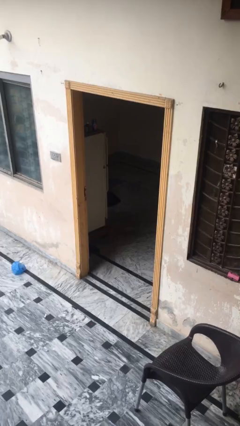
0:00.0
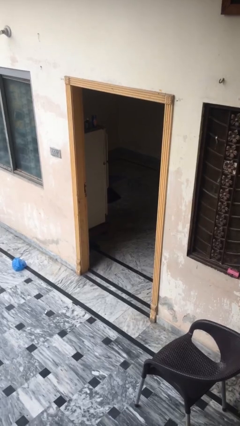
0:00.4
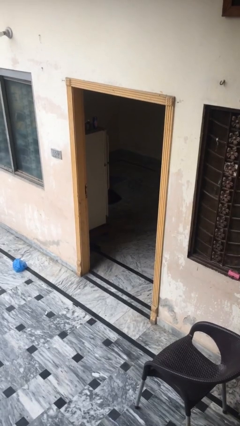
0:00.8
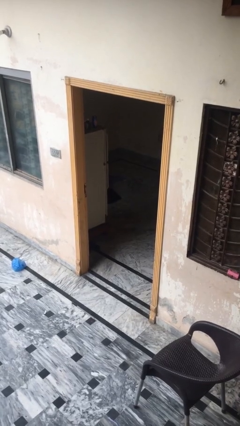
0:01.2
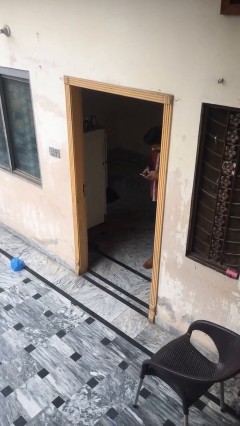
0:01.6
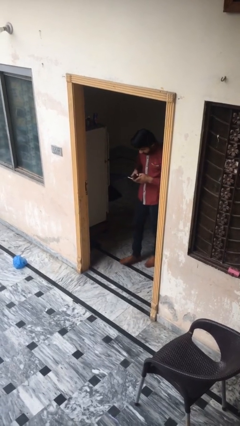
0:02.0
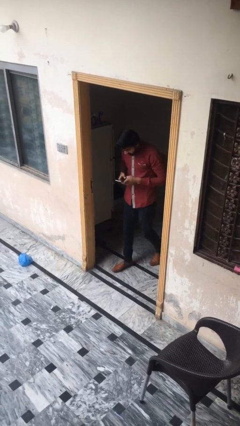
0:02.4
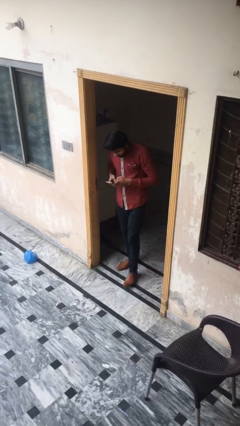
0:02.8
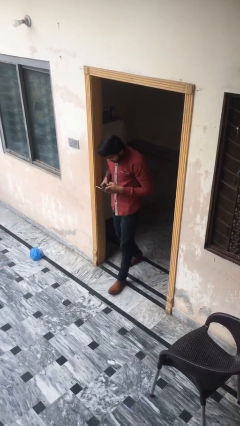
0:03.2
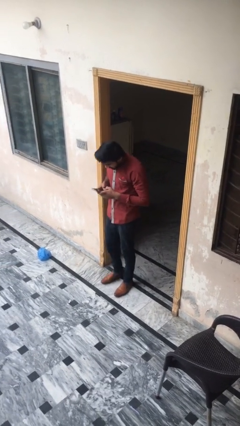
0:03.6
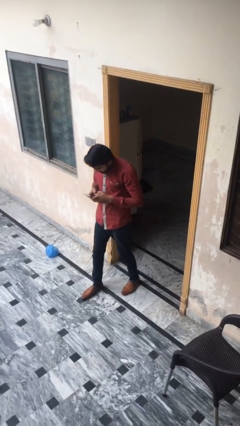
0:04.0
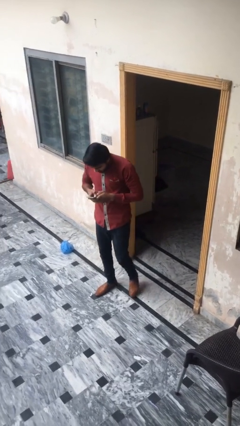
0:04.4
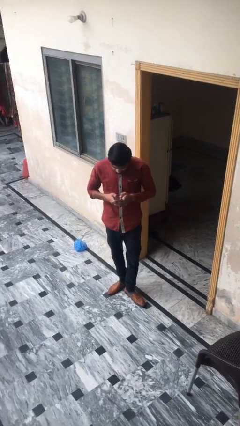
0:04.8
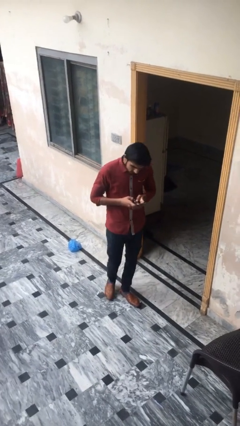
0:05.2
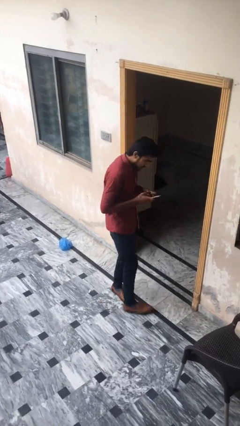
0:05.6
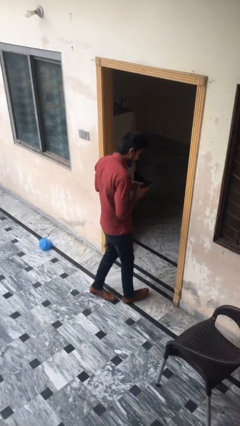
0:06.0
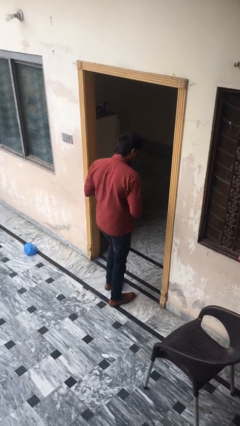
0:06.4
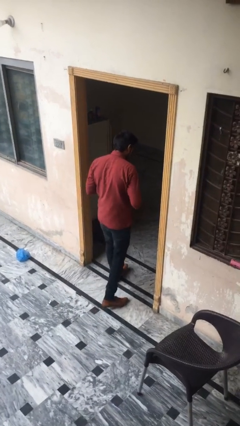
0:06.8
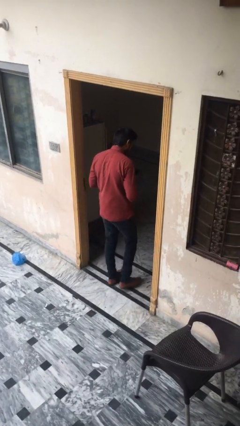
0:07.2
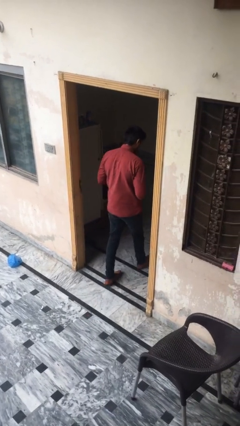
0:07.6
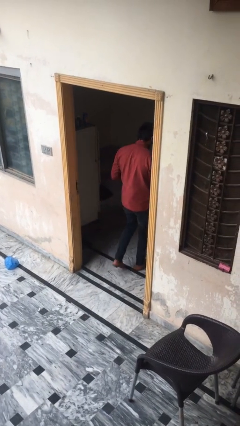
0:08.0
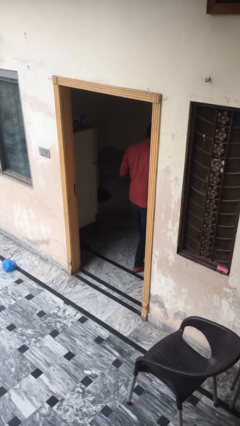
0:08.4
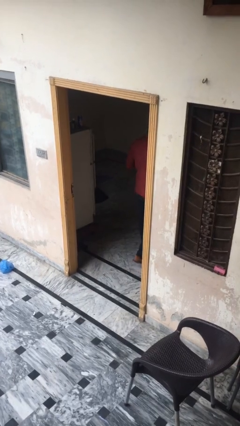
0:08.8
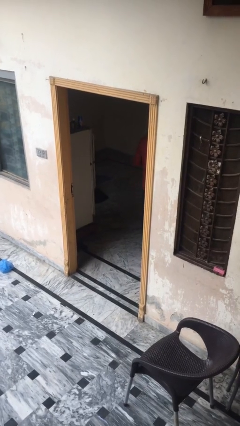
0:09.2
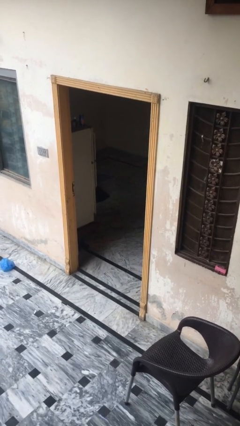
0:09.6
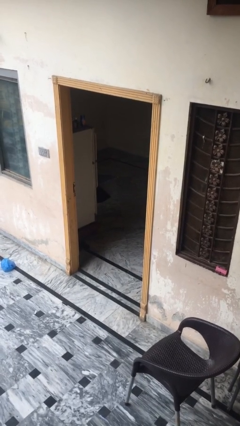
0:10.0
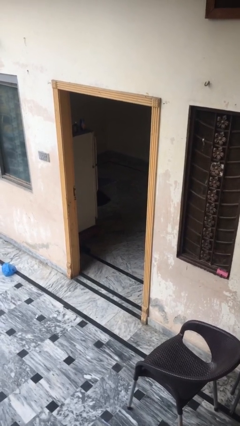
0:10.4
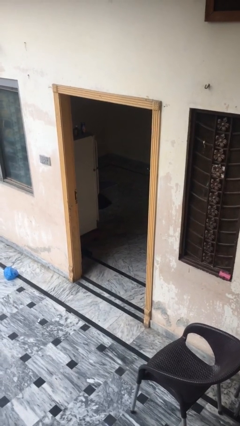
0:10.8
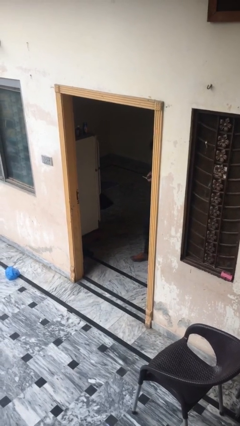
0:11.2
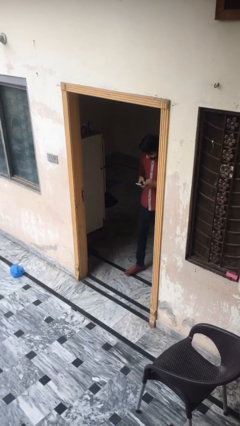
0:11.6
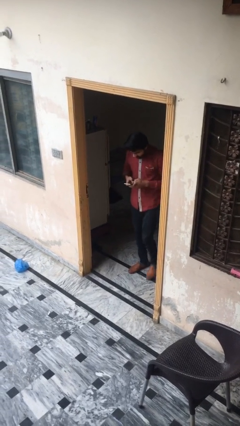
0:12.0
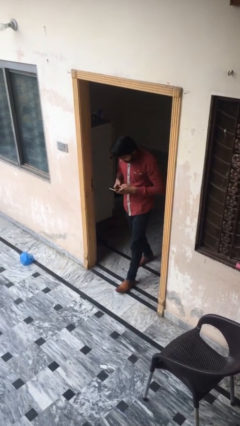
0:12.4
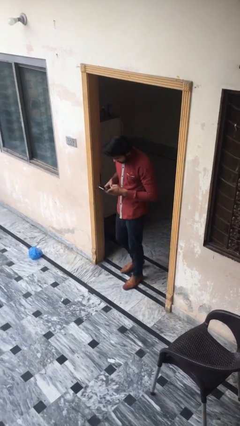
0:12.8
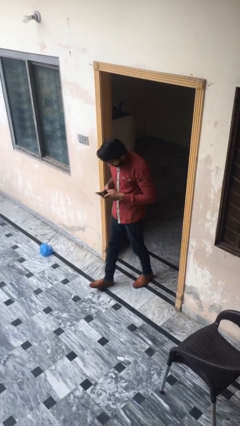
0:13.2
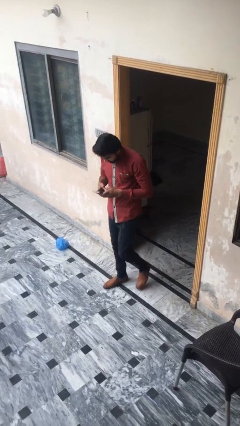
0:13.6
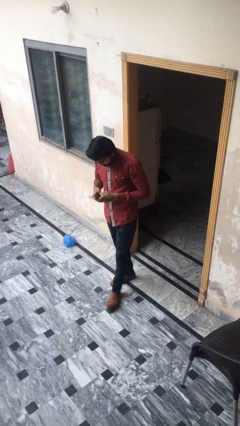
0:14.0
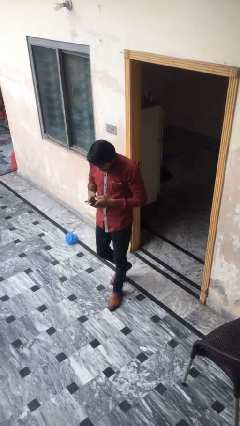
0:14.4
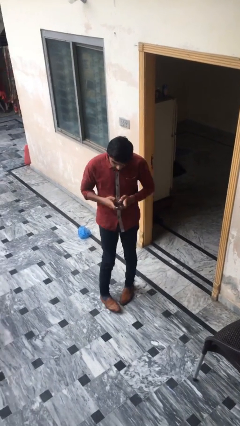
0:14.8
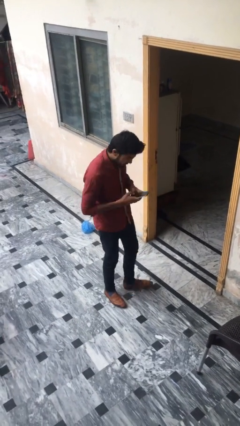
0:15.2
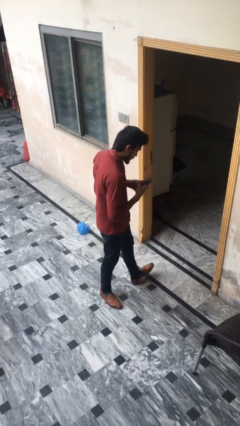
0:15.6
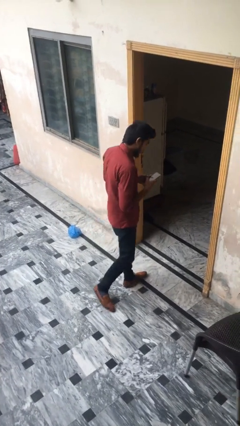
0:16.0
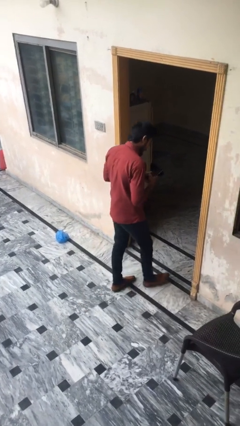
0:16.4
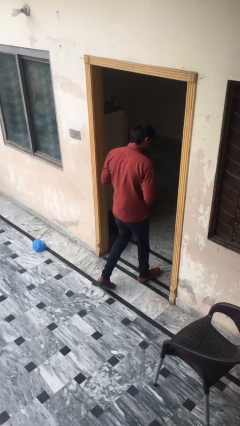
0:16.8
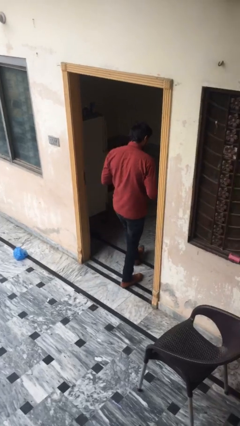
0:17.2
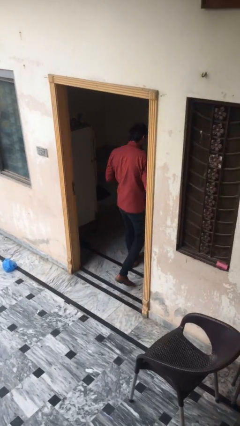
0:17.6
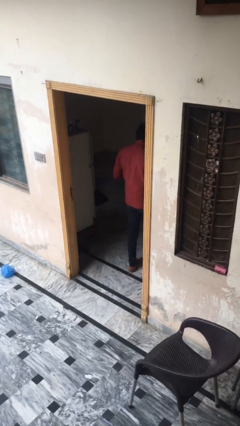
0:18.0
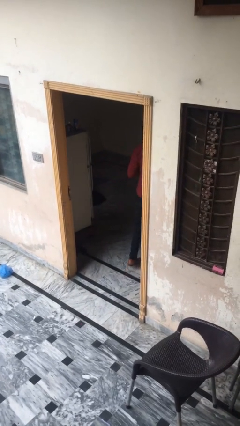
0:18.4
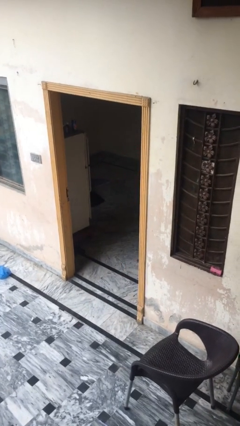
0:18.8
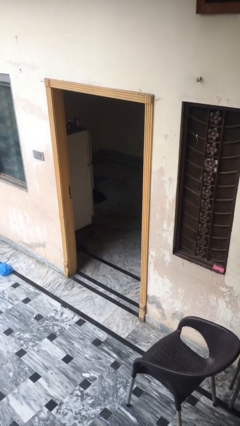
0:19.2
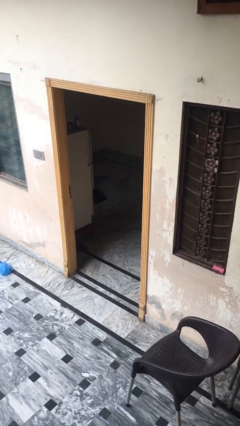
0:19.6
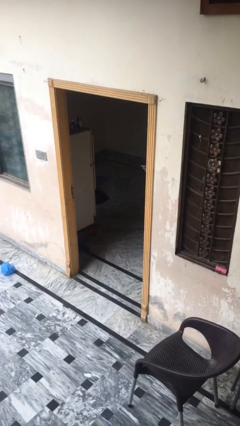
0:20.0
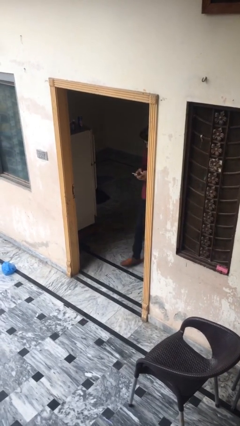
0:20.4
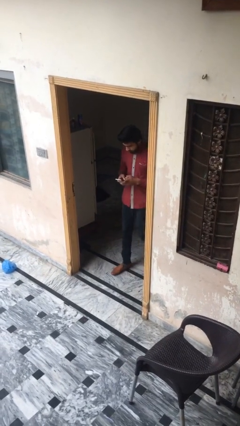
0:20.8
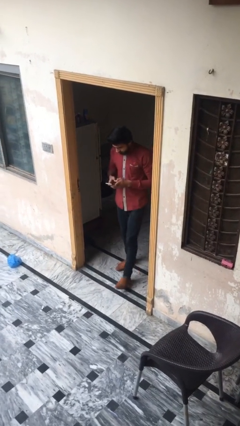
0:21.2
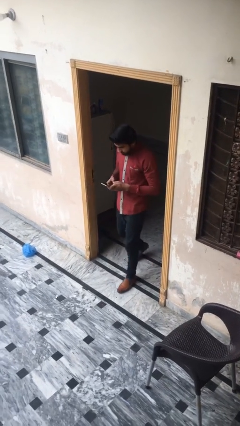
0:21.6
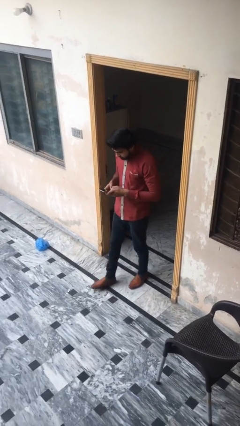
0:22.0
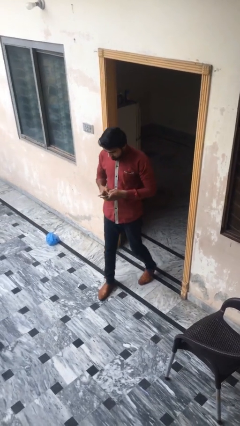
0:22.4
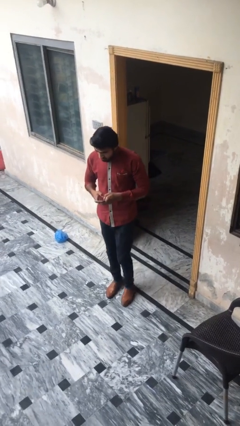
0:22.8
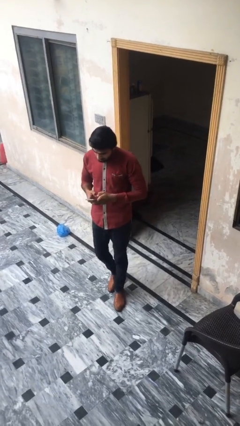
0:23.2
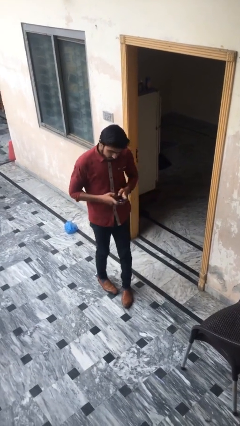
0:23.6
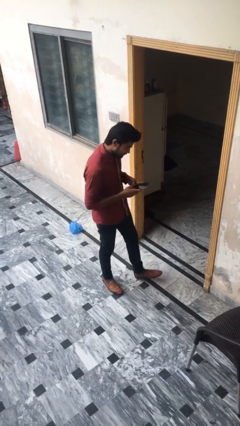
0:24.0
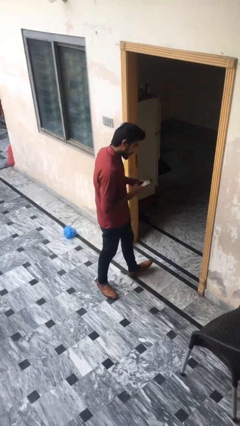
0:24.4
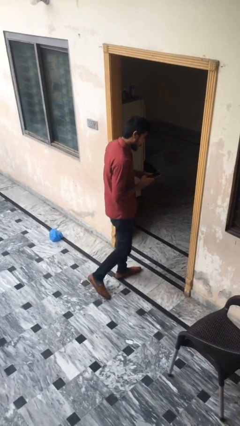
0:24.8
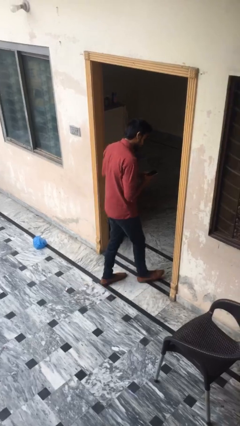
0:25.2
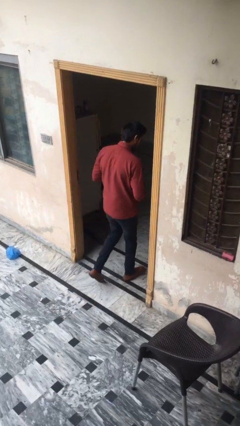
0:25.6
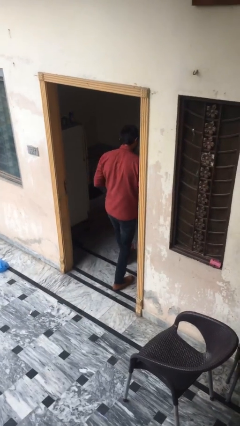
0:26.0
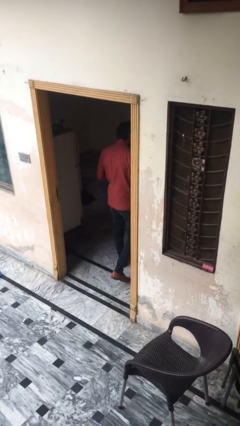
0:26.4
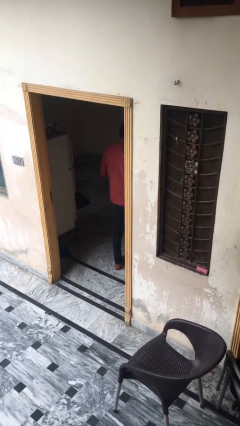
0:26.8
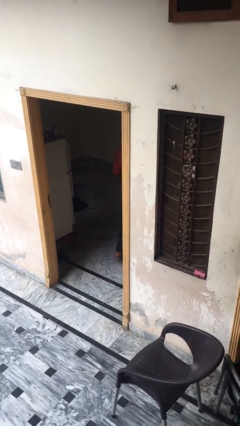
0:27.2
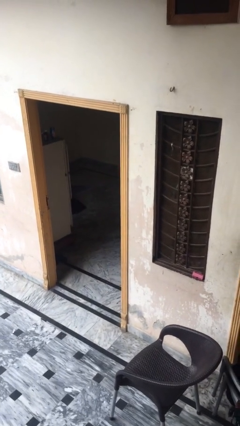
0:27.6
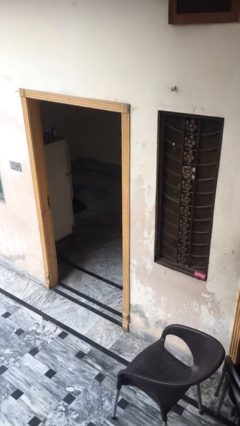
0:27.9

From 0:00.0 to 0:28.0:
person texts on phone

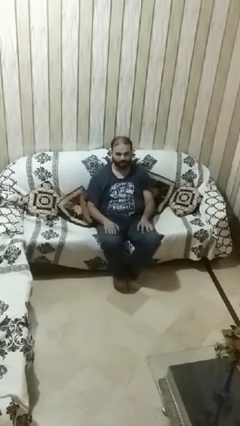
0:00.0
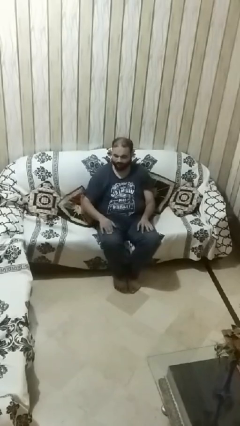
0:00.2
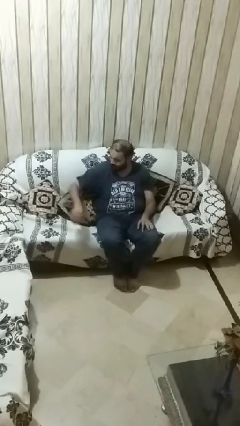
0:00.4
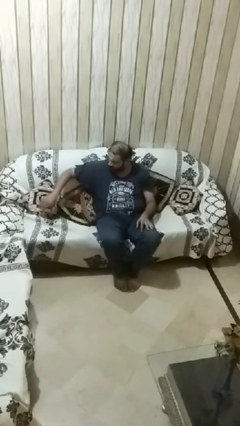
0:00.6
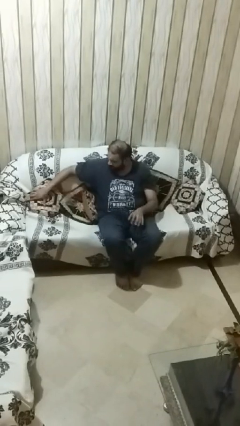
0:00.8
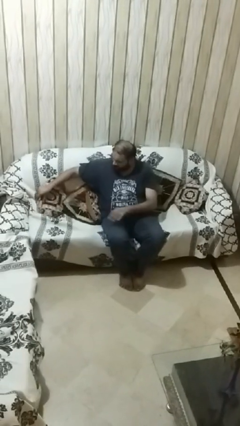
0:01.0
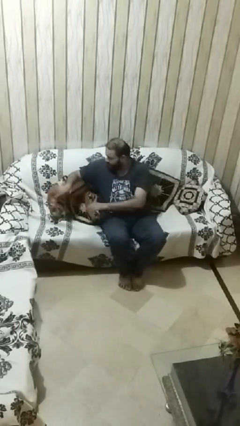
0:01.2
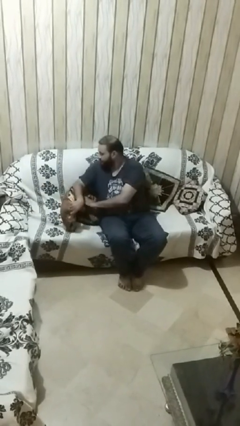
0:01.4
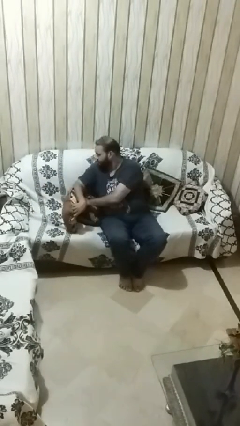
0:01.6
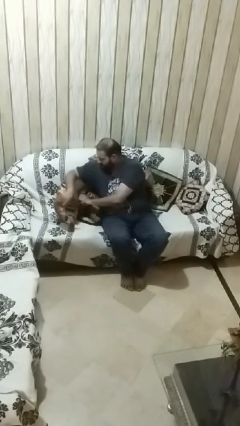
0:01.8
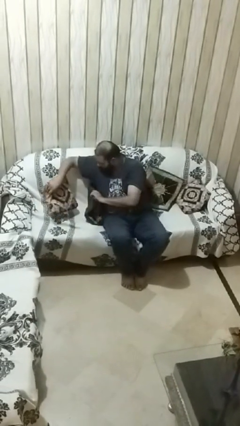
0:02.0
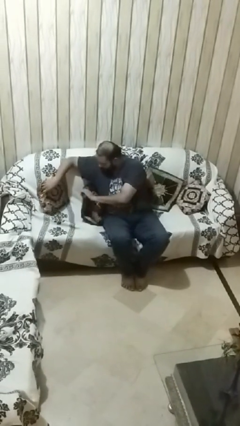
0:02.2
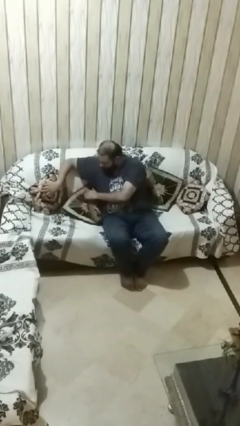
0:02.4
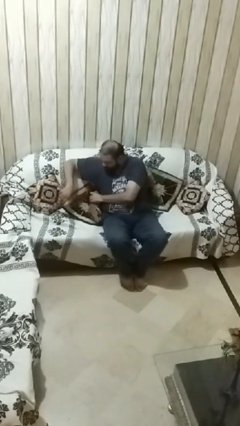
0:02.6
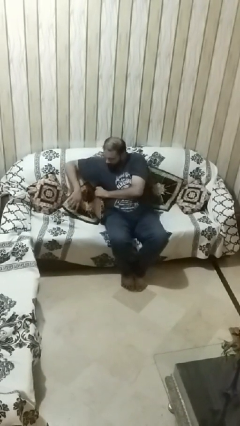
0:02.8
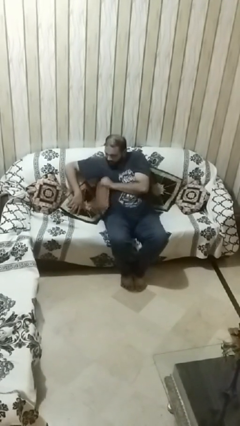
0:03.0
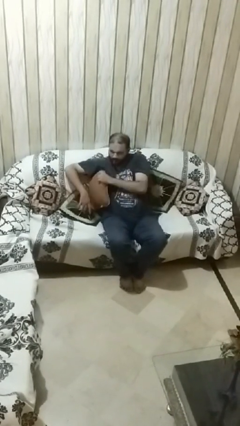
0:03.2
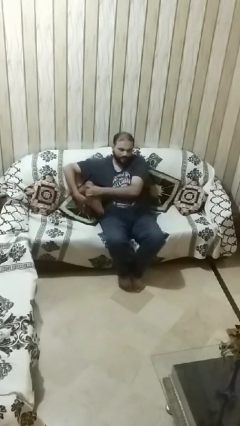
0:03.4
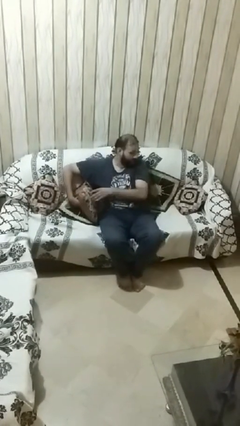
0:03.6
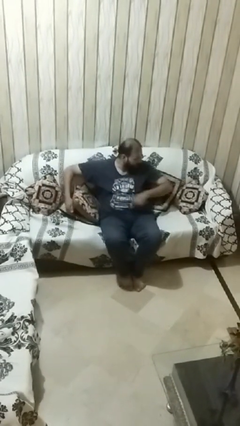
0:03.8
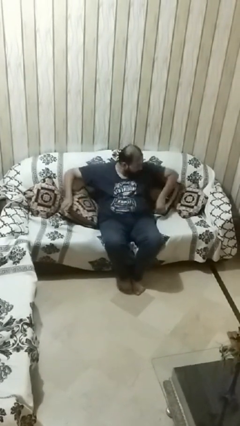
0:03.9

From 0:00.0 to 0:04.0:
person searches in couch
